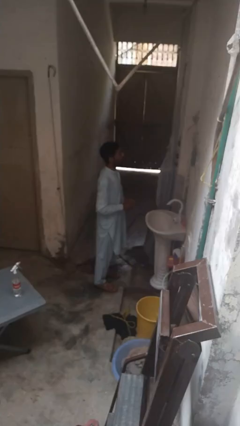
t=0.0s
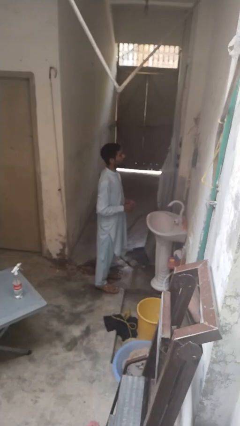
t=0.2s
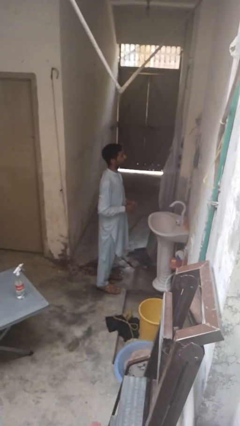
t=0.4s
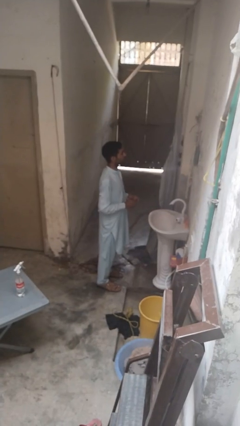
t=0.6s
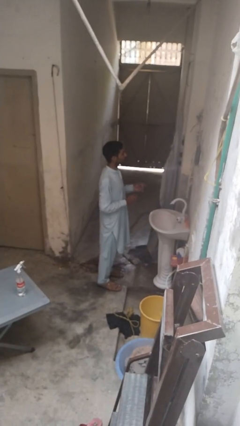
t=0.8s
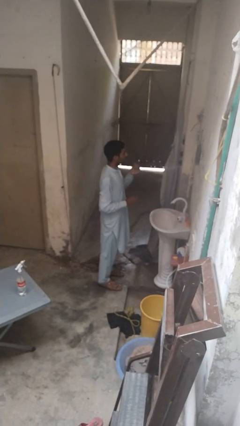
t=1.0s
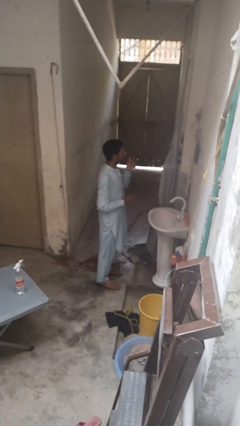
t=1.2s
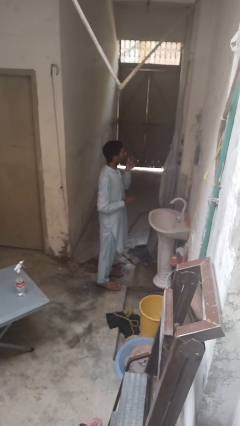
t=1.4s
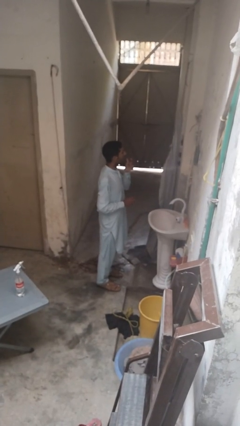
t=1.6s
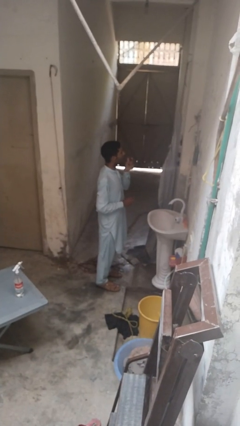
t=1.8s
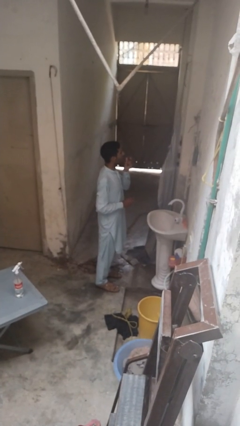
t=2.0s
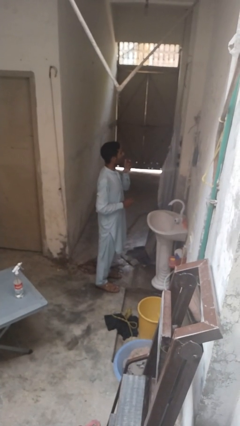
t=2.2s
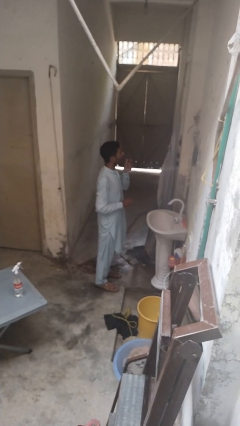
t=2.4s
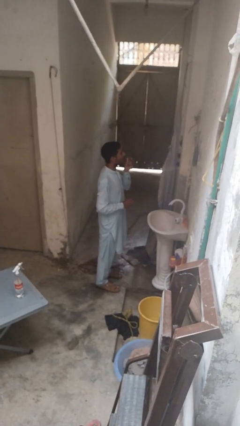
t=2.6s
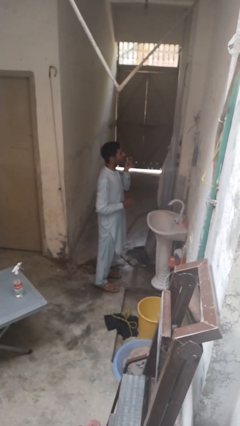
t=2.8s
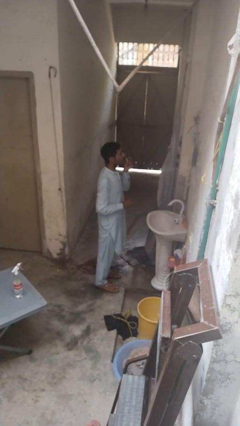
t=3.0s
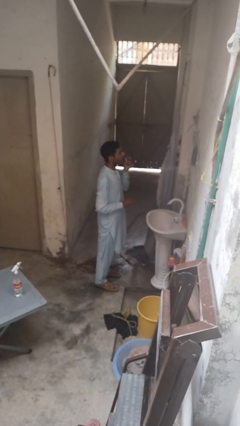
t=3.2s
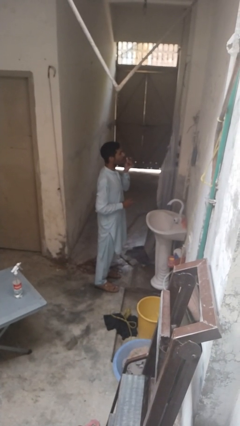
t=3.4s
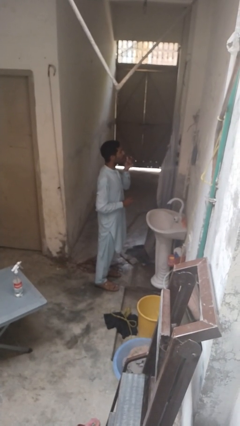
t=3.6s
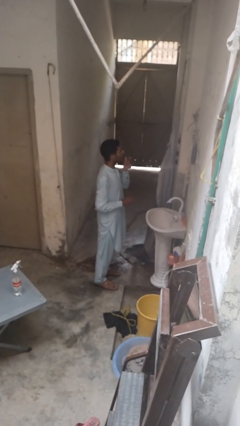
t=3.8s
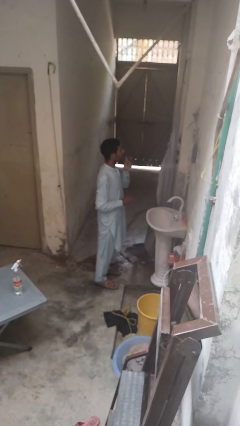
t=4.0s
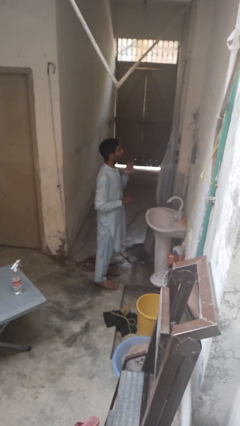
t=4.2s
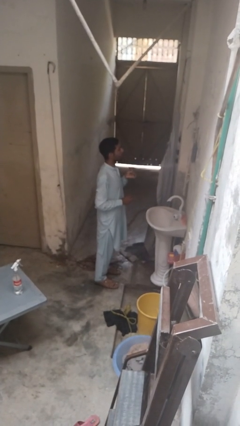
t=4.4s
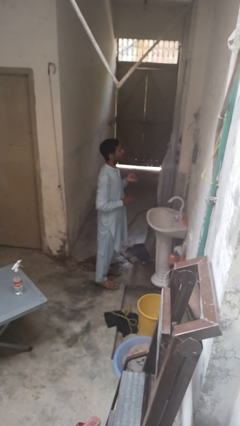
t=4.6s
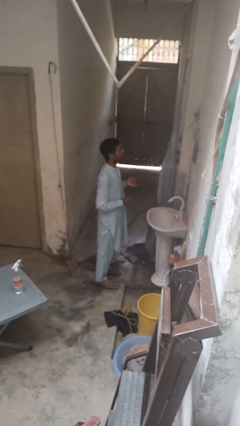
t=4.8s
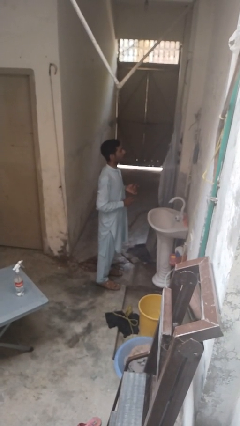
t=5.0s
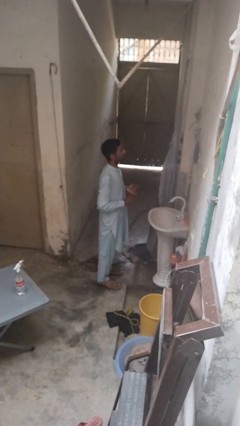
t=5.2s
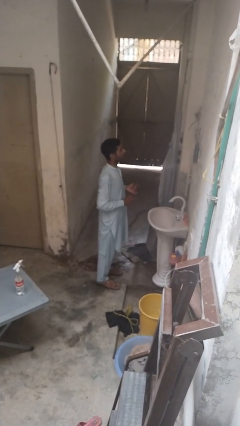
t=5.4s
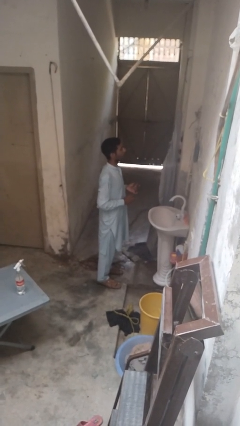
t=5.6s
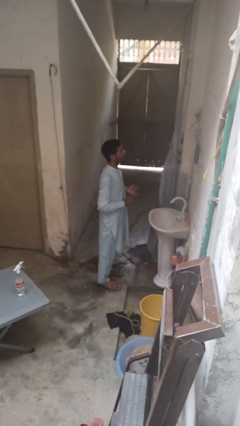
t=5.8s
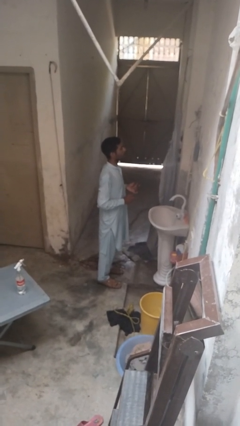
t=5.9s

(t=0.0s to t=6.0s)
person applies lip makeup

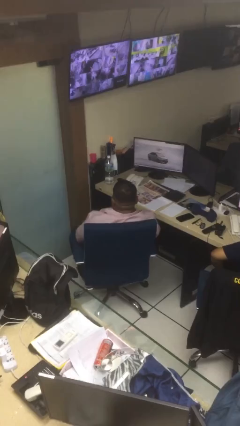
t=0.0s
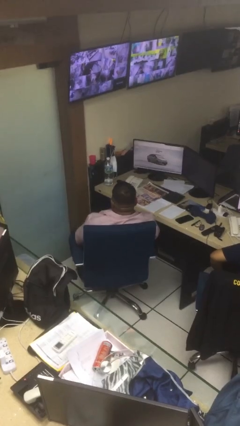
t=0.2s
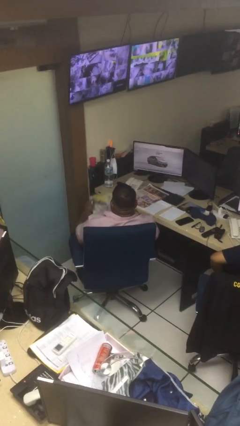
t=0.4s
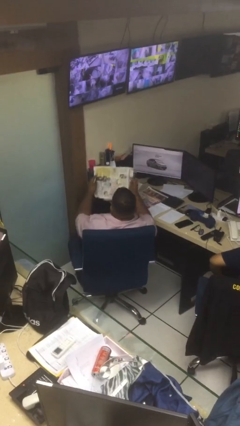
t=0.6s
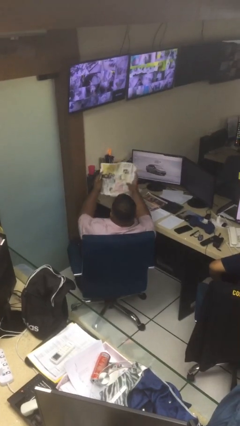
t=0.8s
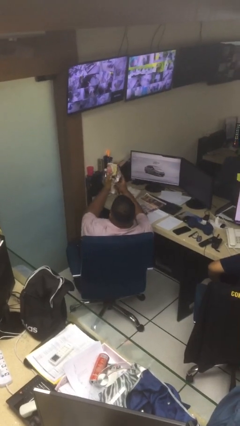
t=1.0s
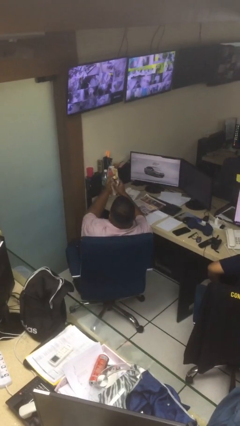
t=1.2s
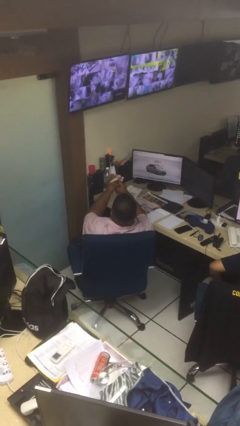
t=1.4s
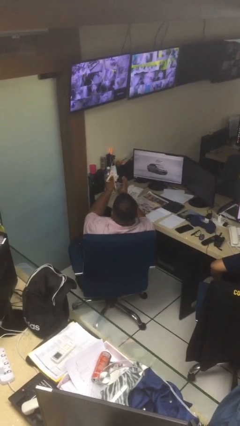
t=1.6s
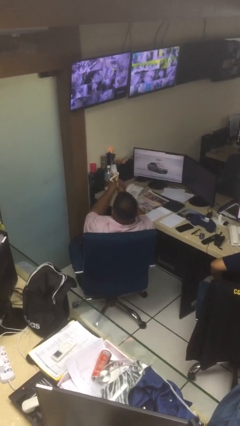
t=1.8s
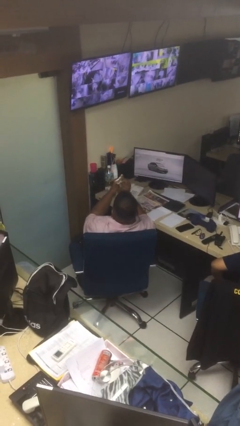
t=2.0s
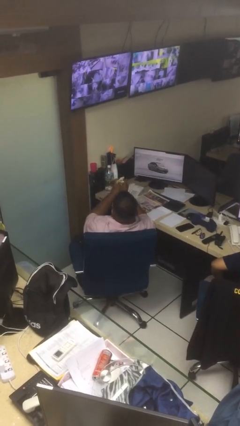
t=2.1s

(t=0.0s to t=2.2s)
person crumples paper

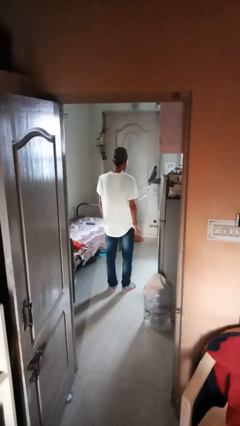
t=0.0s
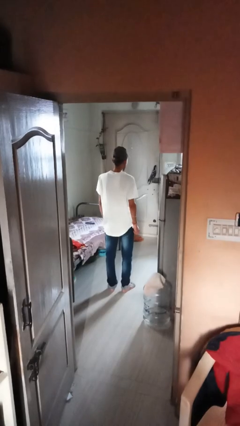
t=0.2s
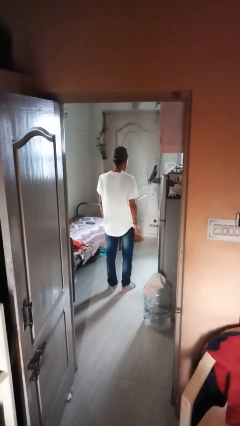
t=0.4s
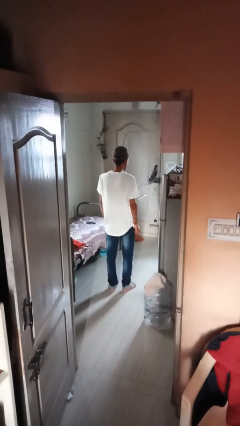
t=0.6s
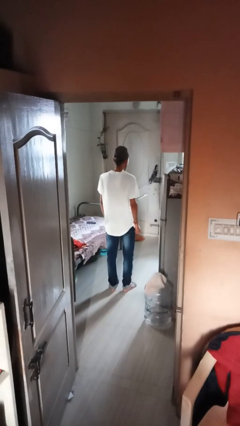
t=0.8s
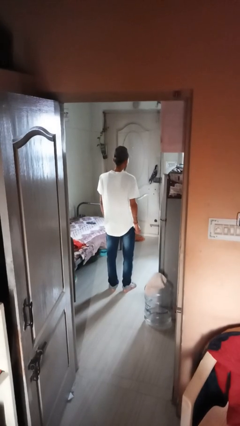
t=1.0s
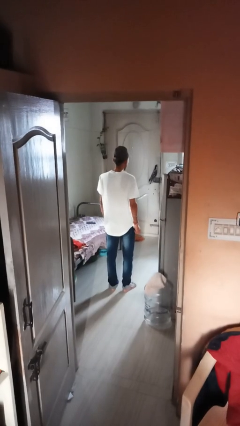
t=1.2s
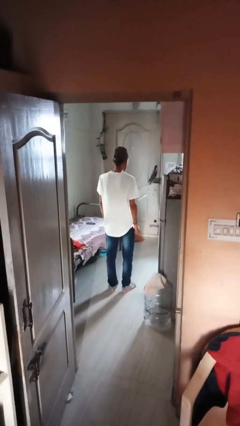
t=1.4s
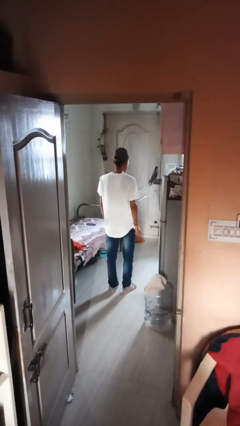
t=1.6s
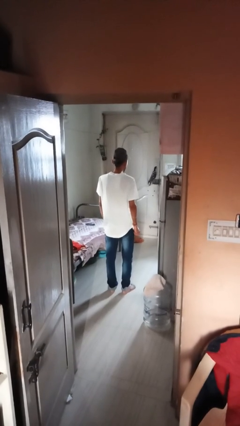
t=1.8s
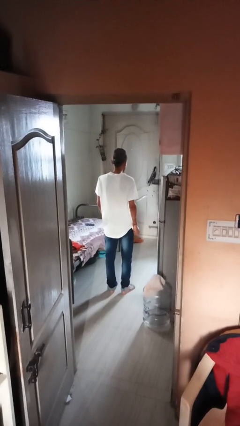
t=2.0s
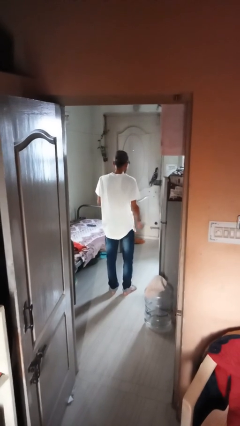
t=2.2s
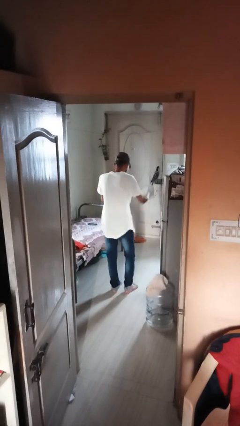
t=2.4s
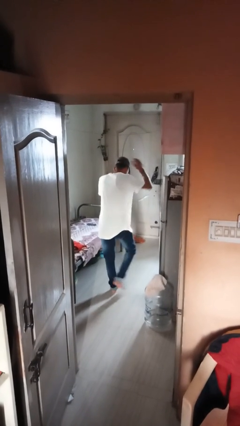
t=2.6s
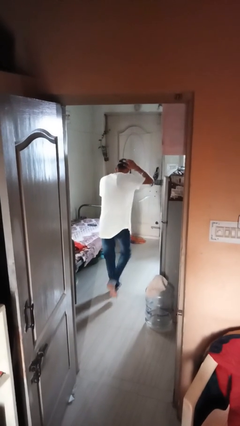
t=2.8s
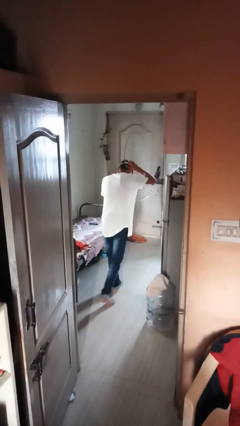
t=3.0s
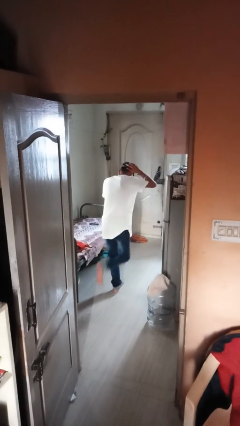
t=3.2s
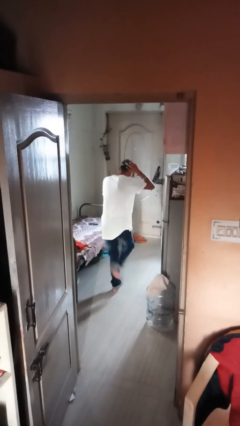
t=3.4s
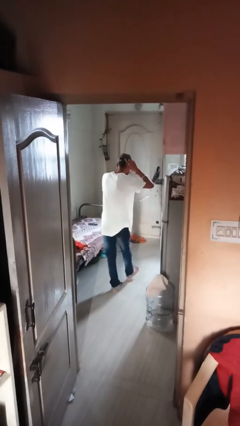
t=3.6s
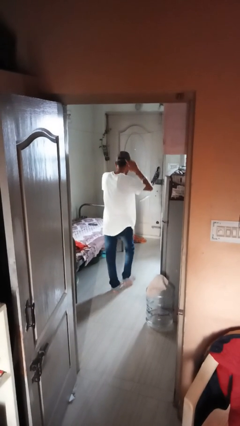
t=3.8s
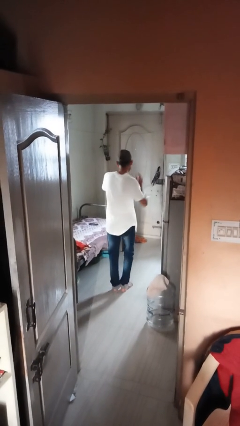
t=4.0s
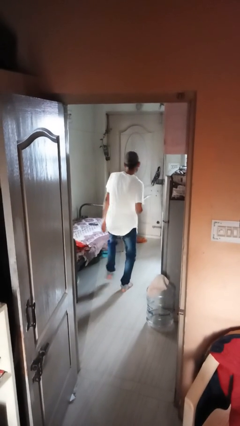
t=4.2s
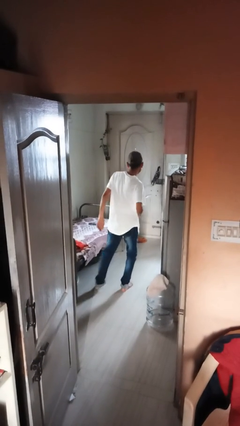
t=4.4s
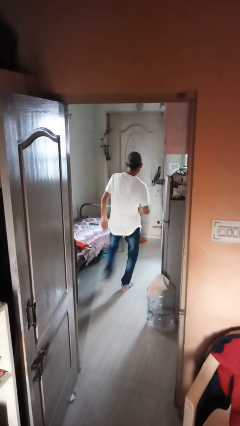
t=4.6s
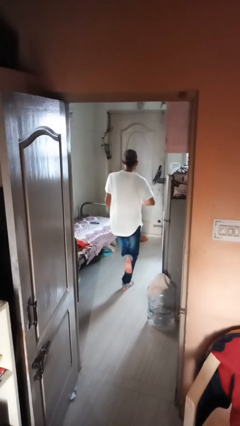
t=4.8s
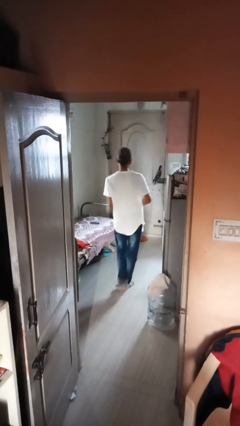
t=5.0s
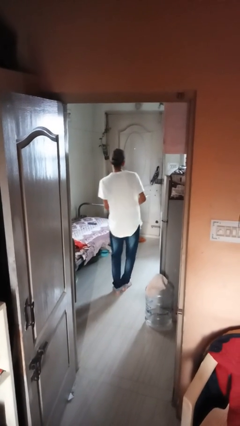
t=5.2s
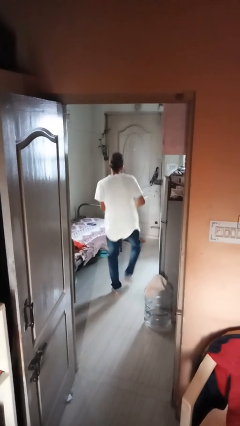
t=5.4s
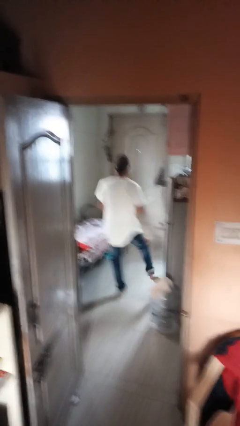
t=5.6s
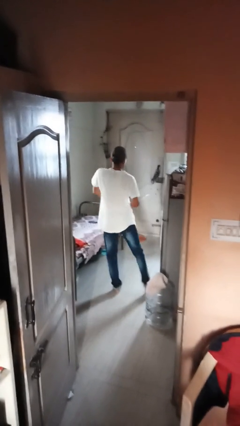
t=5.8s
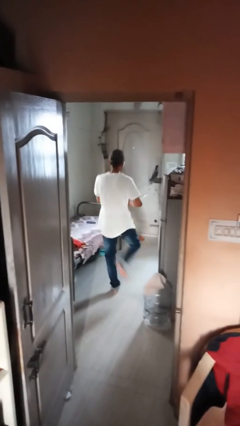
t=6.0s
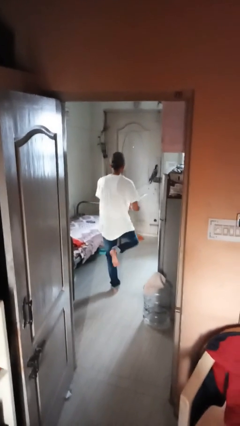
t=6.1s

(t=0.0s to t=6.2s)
person dances in place

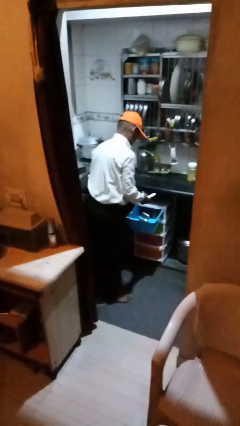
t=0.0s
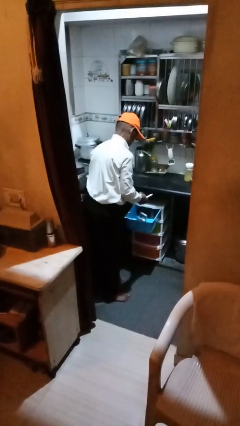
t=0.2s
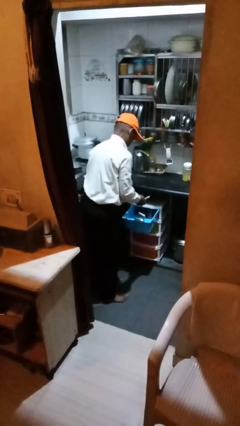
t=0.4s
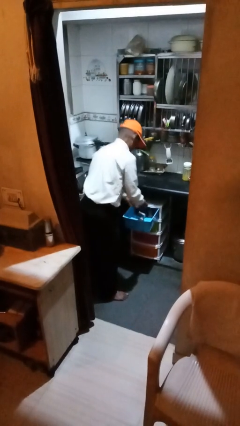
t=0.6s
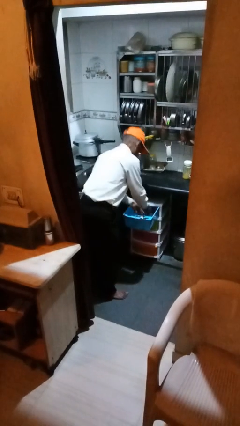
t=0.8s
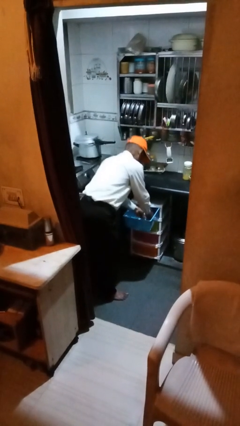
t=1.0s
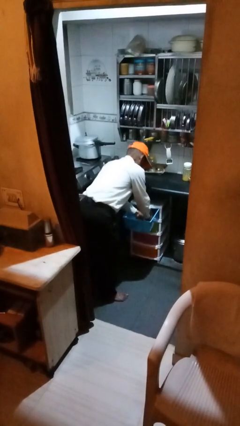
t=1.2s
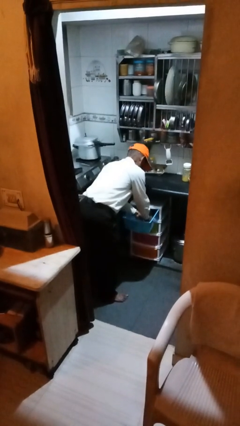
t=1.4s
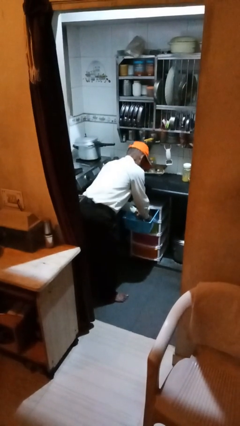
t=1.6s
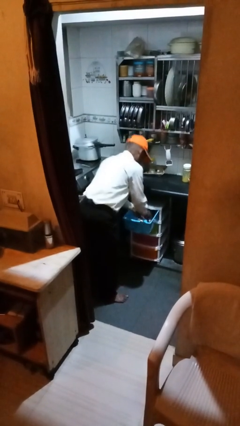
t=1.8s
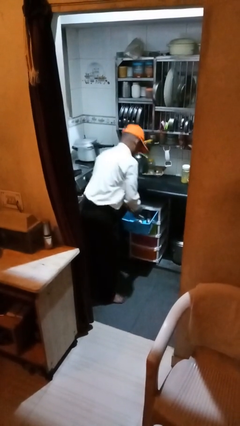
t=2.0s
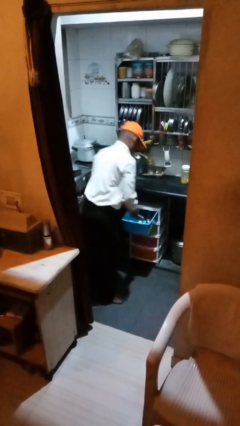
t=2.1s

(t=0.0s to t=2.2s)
person puts object into kitchen drawer

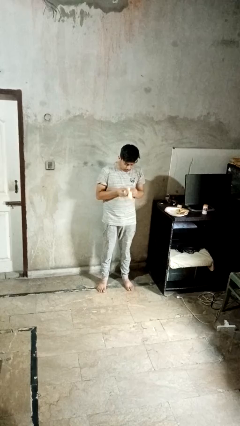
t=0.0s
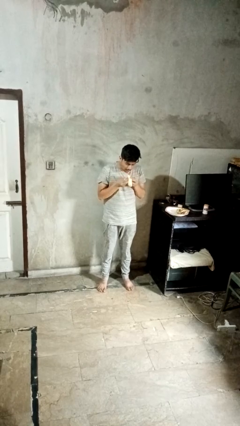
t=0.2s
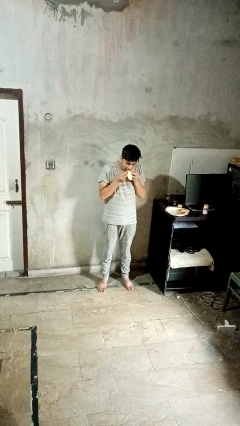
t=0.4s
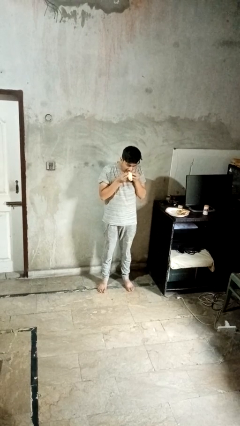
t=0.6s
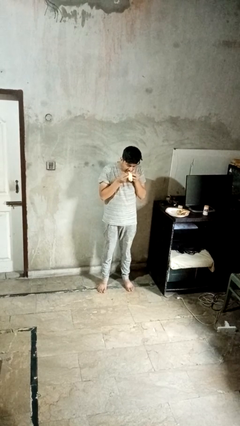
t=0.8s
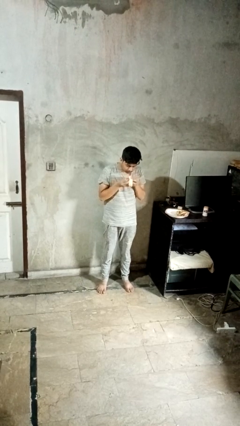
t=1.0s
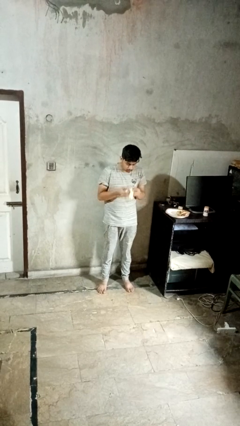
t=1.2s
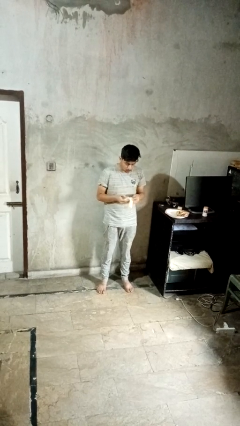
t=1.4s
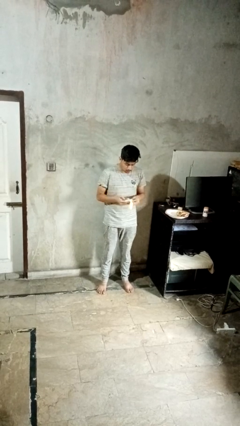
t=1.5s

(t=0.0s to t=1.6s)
person eats banana
